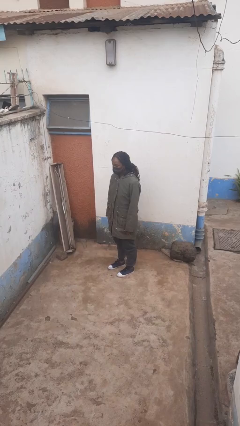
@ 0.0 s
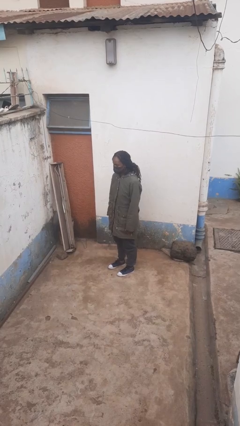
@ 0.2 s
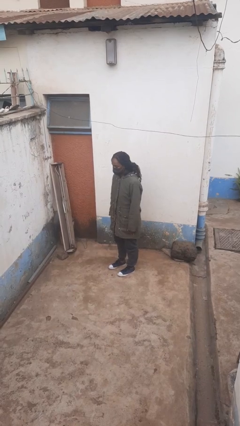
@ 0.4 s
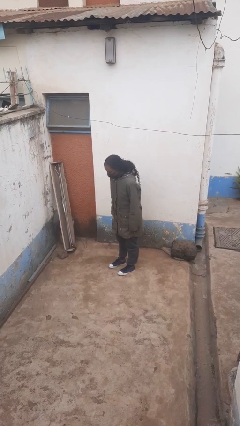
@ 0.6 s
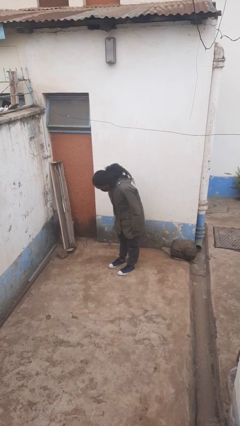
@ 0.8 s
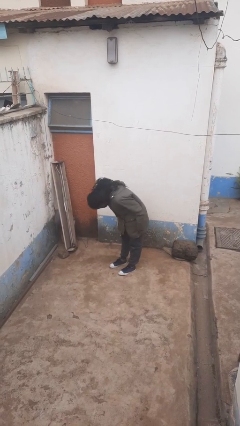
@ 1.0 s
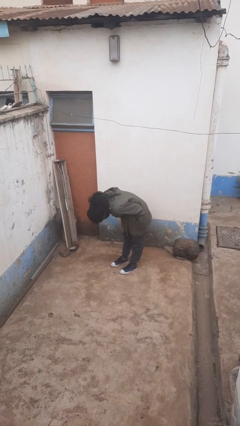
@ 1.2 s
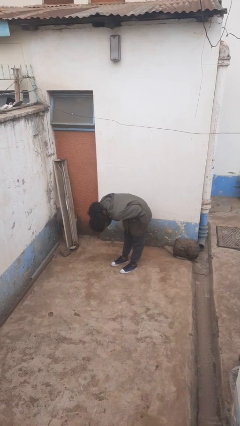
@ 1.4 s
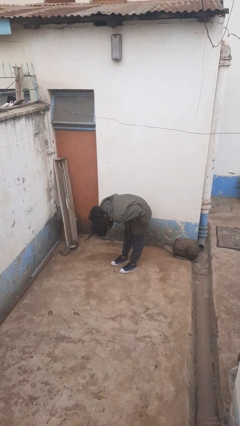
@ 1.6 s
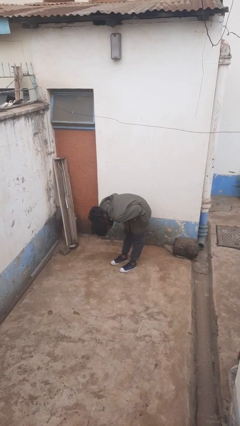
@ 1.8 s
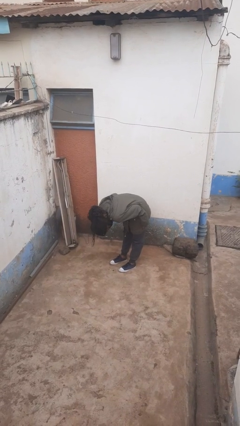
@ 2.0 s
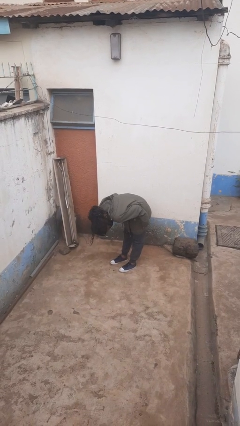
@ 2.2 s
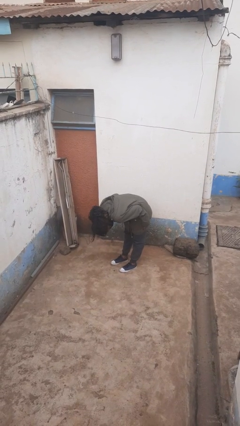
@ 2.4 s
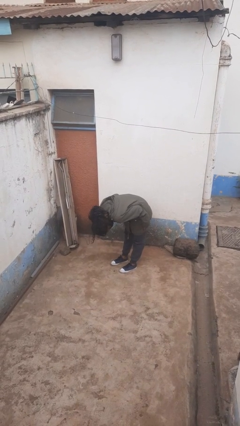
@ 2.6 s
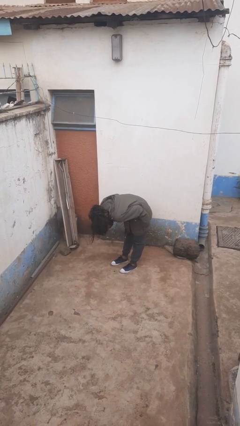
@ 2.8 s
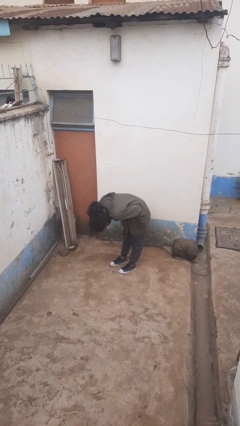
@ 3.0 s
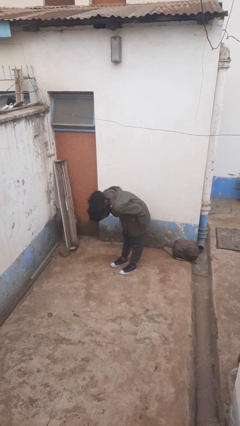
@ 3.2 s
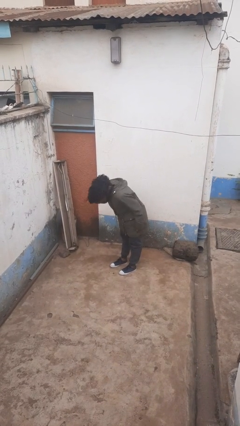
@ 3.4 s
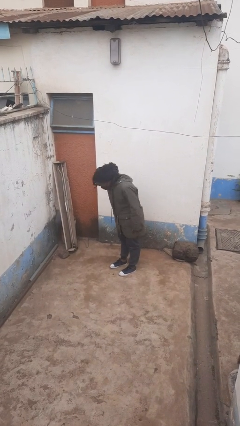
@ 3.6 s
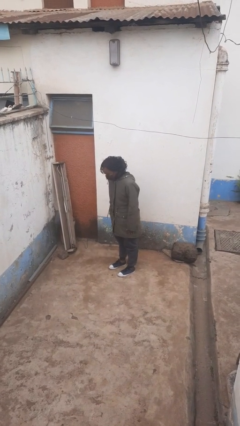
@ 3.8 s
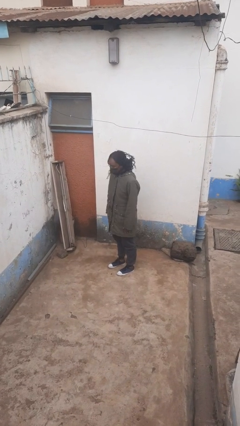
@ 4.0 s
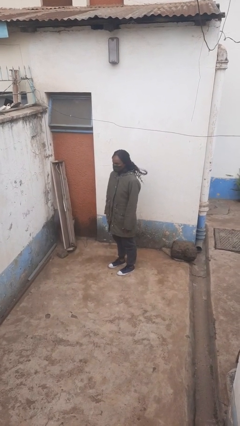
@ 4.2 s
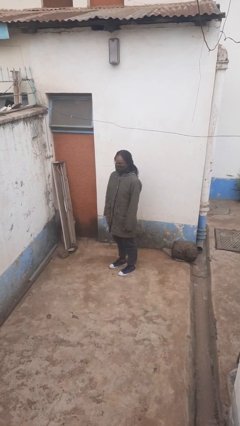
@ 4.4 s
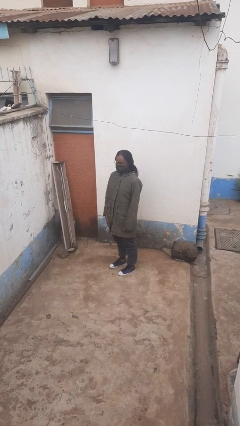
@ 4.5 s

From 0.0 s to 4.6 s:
person bows

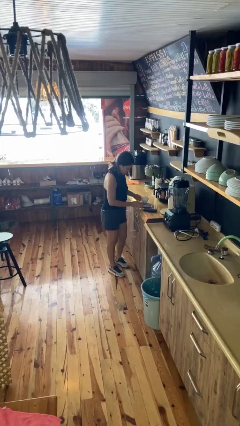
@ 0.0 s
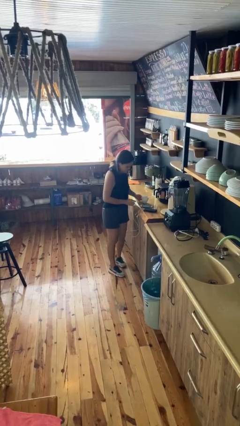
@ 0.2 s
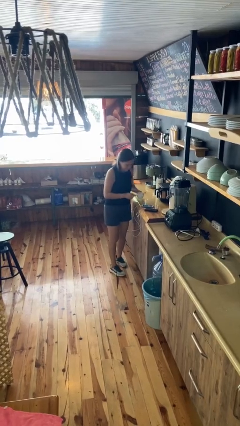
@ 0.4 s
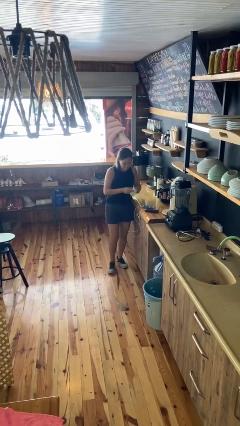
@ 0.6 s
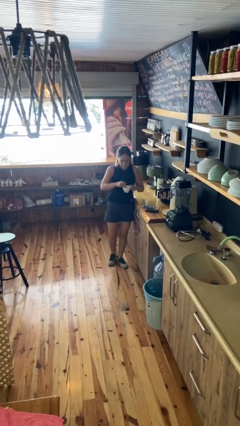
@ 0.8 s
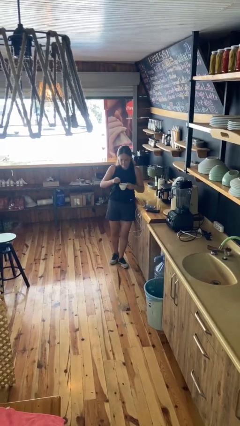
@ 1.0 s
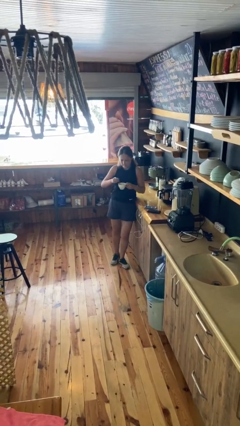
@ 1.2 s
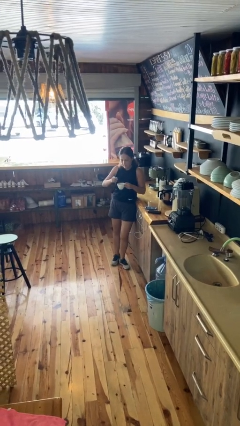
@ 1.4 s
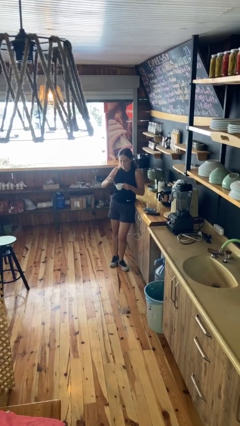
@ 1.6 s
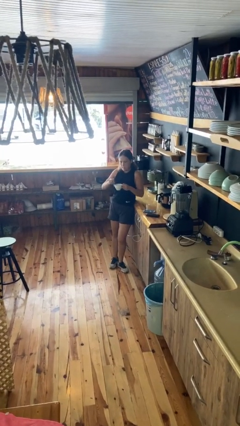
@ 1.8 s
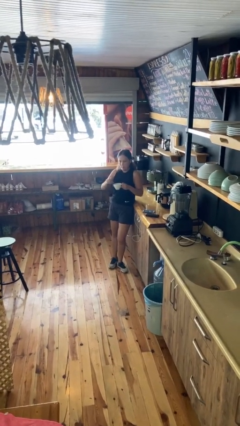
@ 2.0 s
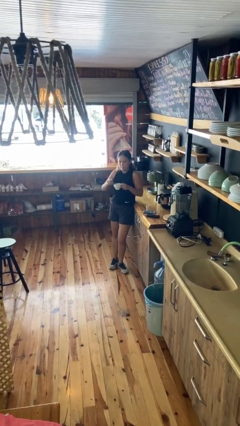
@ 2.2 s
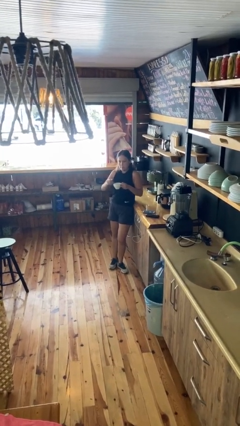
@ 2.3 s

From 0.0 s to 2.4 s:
person stirs mug

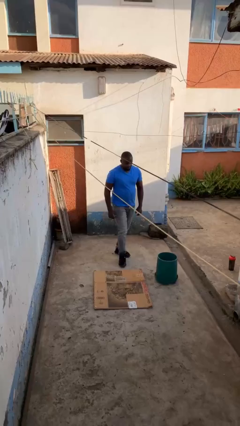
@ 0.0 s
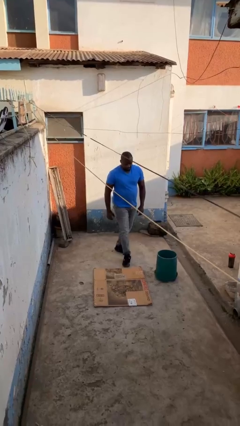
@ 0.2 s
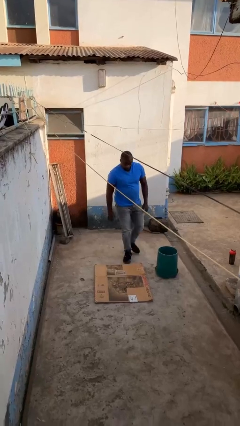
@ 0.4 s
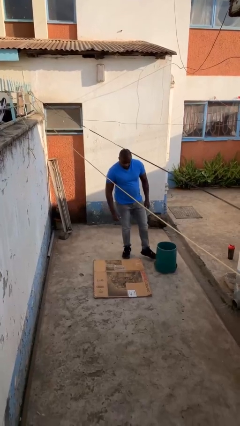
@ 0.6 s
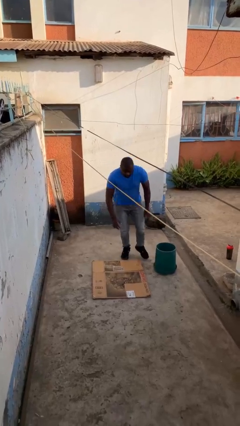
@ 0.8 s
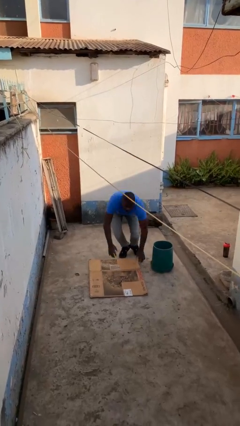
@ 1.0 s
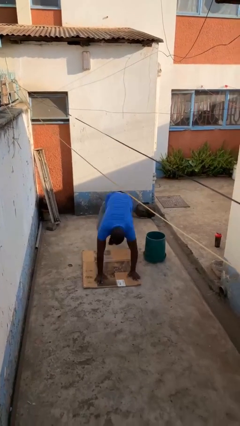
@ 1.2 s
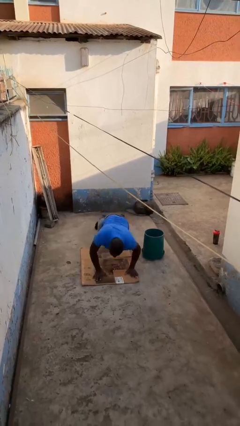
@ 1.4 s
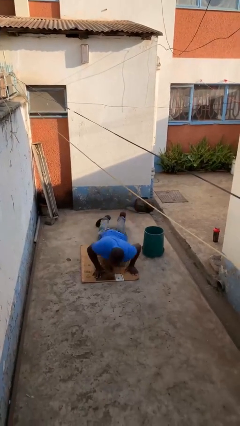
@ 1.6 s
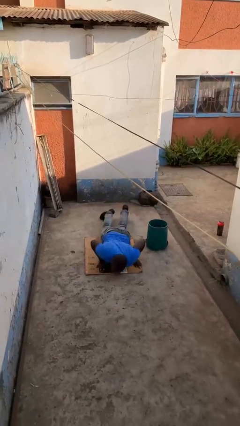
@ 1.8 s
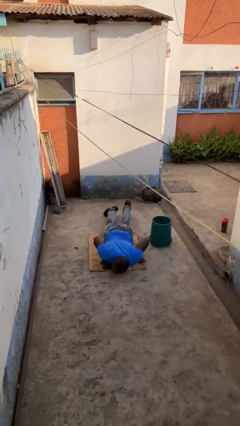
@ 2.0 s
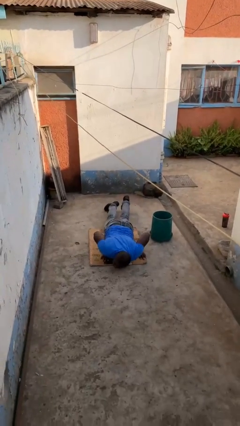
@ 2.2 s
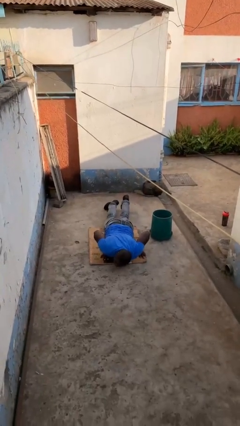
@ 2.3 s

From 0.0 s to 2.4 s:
person trips on object on floor

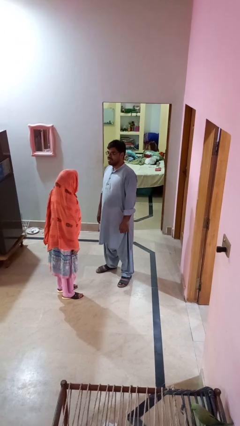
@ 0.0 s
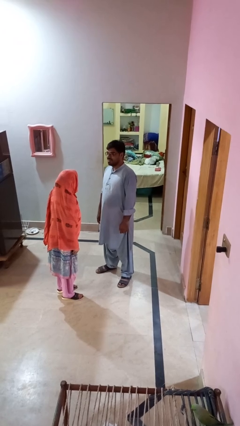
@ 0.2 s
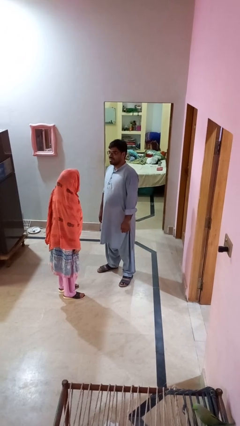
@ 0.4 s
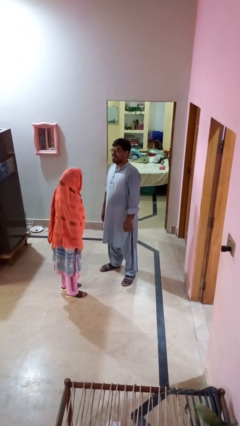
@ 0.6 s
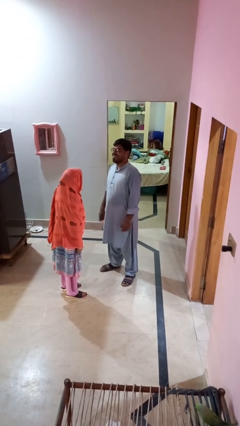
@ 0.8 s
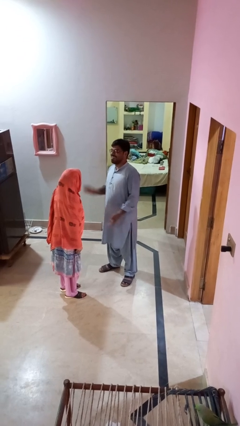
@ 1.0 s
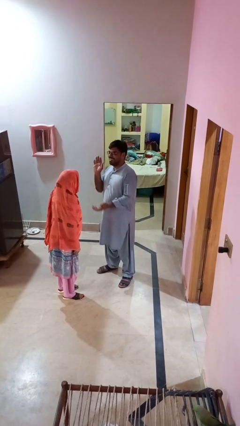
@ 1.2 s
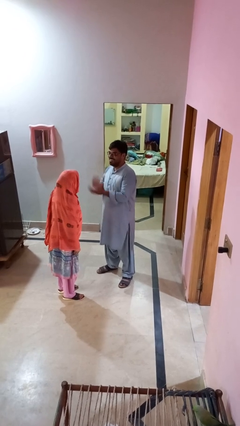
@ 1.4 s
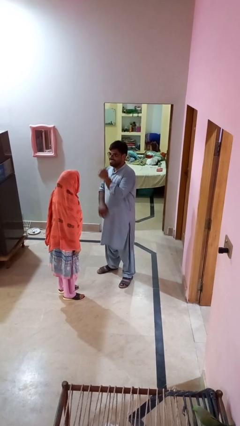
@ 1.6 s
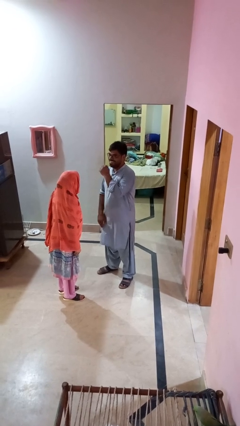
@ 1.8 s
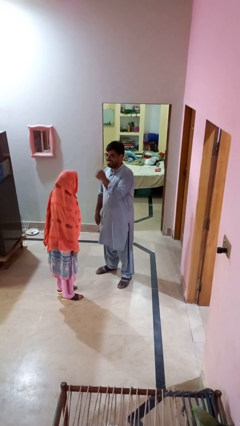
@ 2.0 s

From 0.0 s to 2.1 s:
person laughs with person

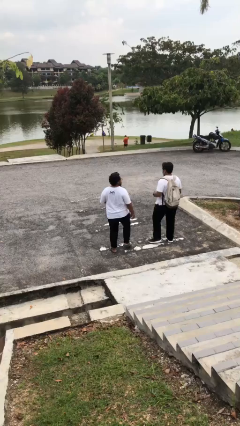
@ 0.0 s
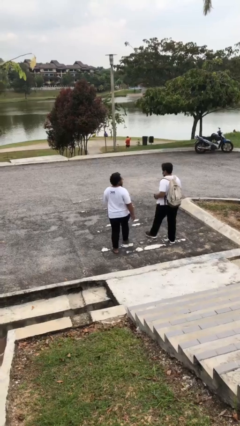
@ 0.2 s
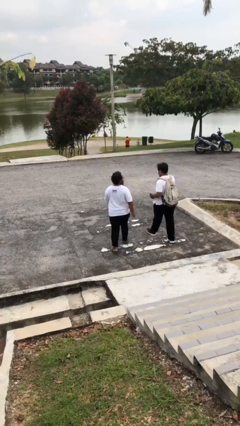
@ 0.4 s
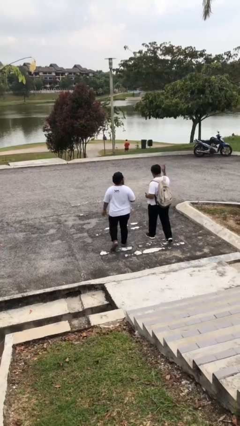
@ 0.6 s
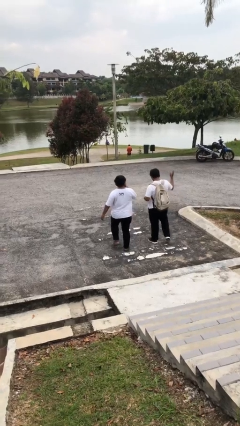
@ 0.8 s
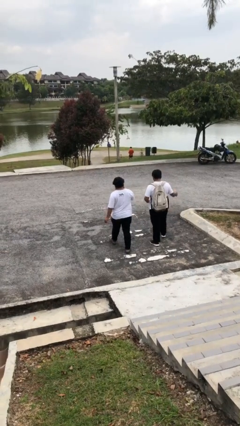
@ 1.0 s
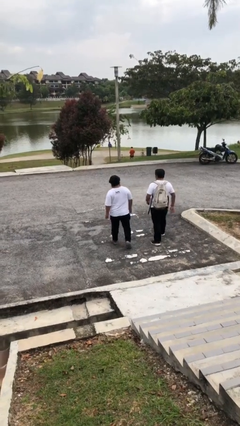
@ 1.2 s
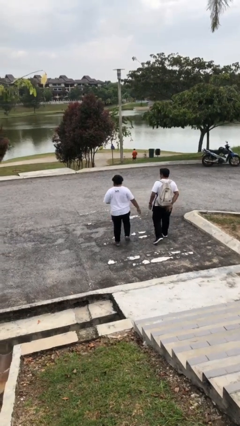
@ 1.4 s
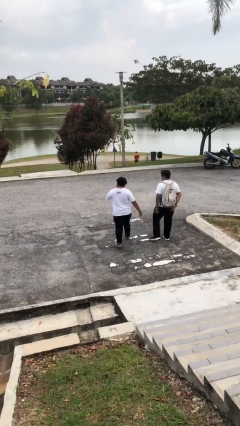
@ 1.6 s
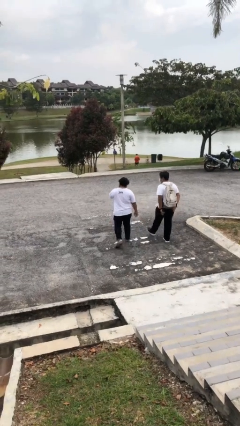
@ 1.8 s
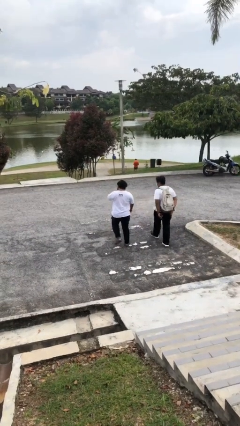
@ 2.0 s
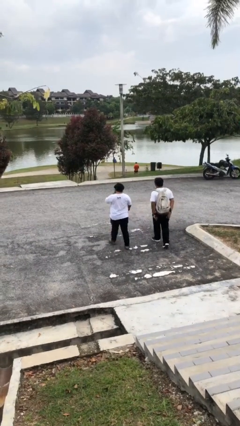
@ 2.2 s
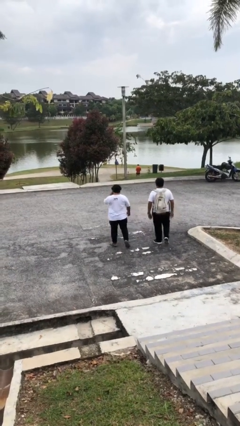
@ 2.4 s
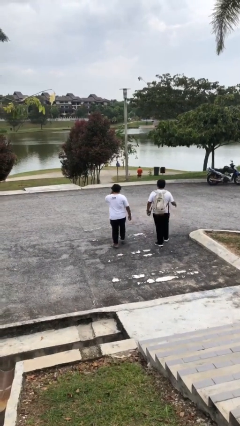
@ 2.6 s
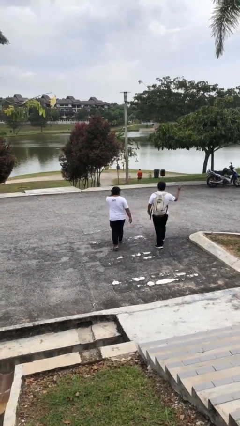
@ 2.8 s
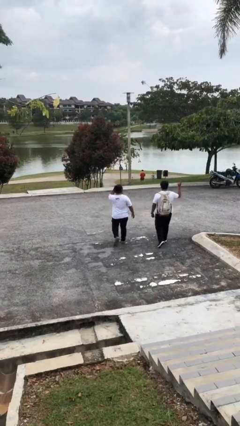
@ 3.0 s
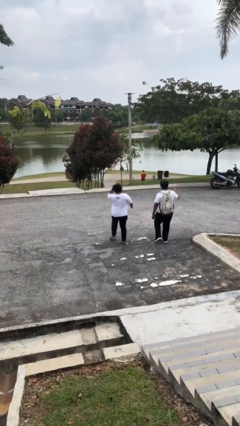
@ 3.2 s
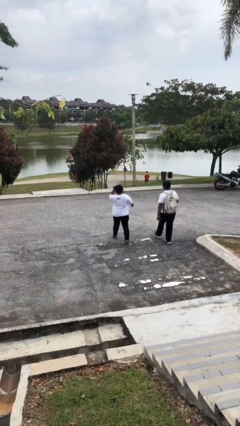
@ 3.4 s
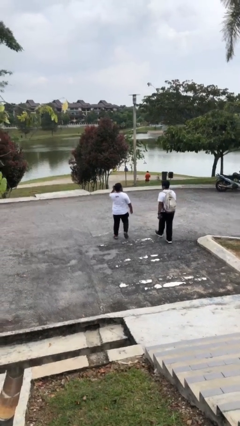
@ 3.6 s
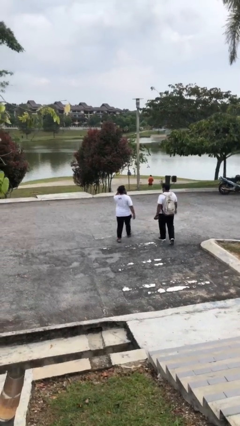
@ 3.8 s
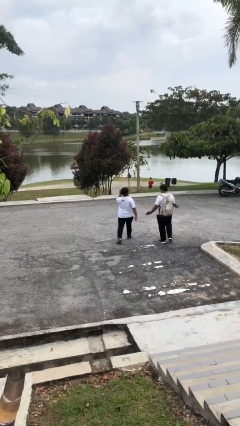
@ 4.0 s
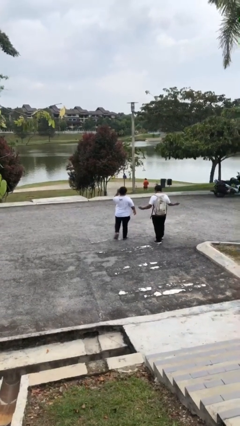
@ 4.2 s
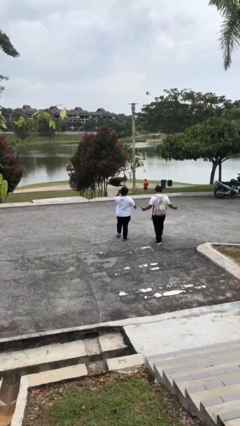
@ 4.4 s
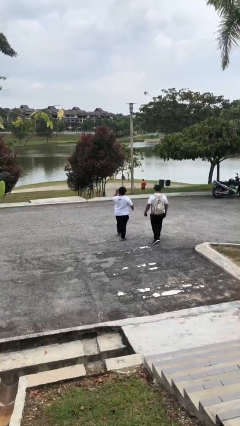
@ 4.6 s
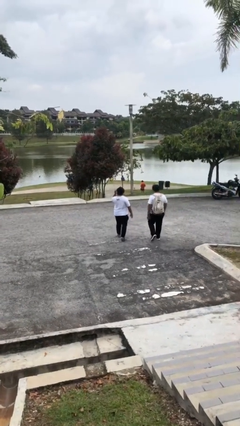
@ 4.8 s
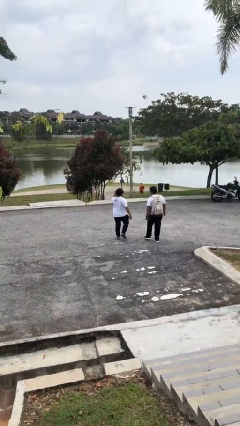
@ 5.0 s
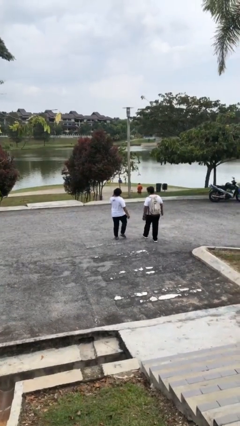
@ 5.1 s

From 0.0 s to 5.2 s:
person talks to person

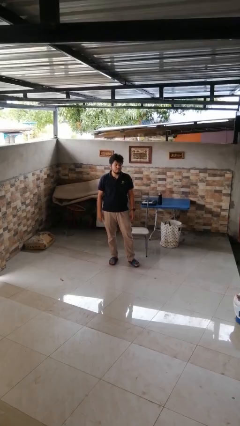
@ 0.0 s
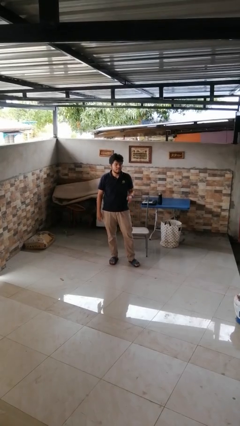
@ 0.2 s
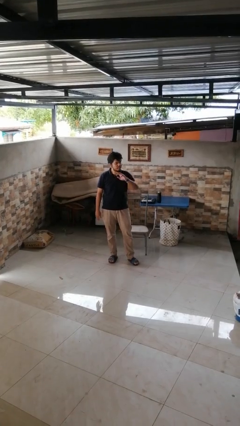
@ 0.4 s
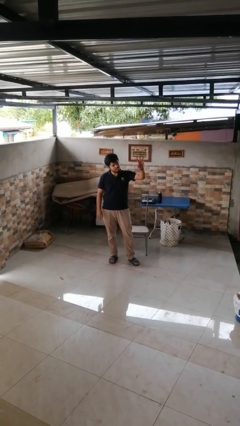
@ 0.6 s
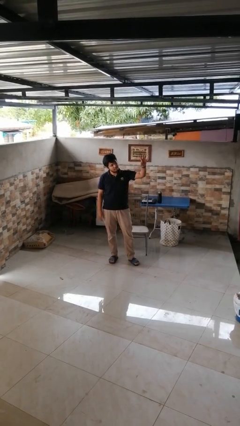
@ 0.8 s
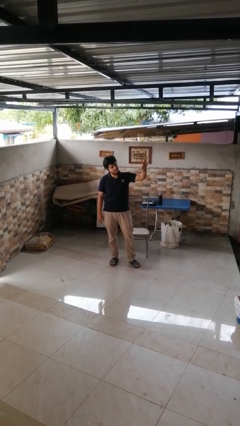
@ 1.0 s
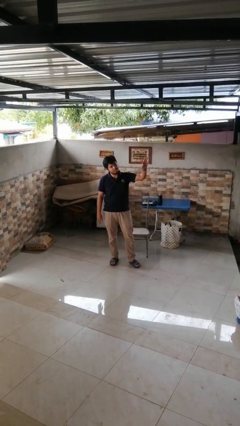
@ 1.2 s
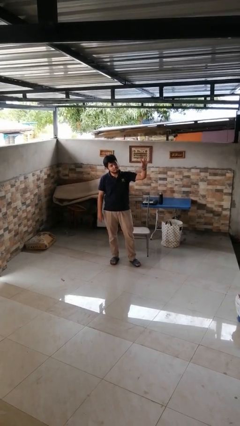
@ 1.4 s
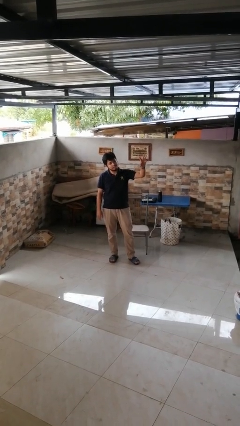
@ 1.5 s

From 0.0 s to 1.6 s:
person gestures swipe left
